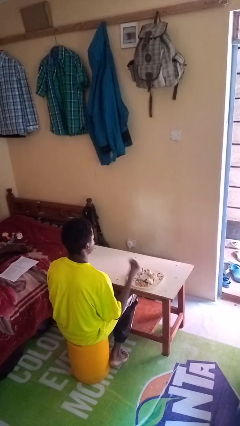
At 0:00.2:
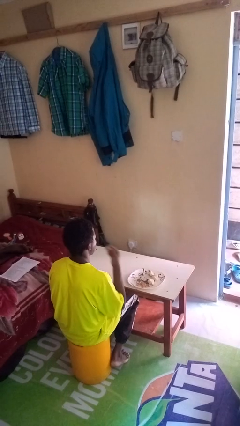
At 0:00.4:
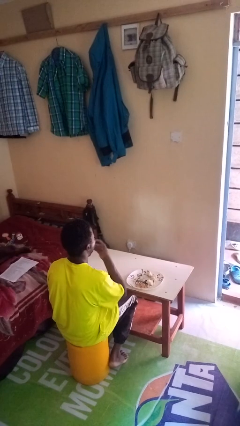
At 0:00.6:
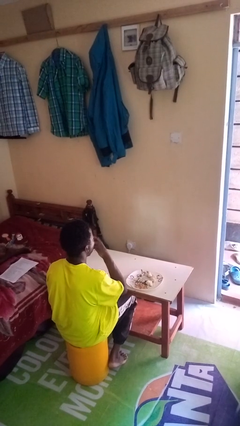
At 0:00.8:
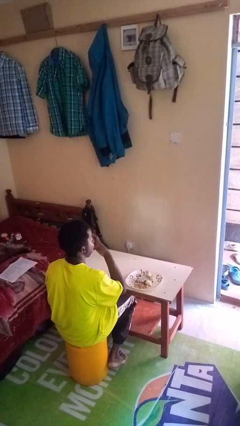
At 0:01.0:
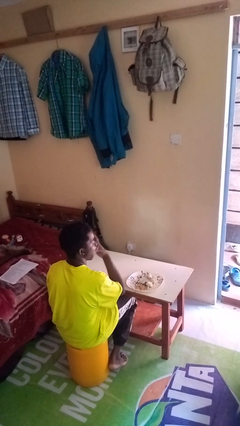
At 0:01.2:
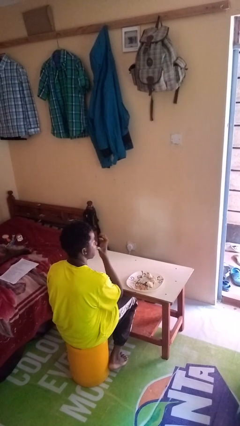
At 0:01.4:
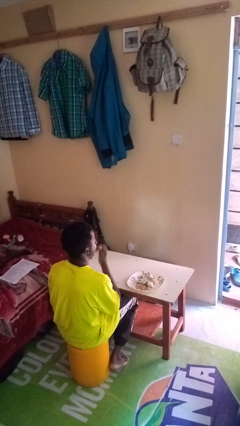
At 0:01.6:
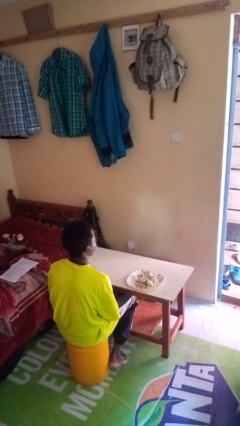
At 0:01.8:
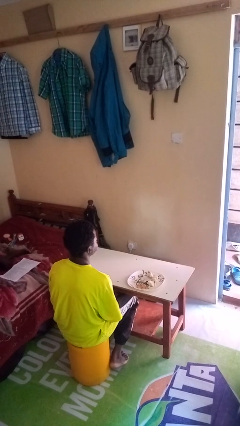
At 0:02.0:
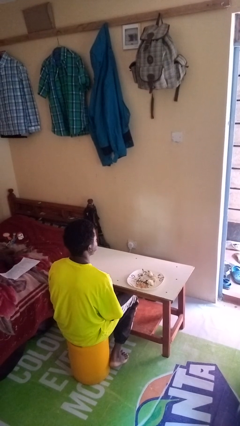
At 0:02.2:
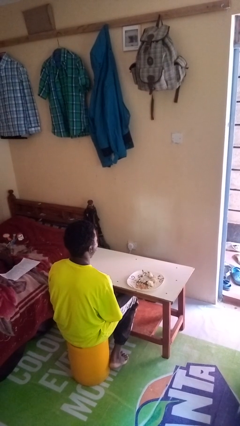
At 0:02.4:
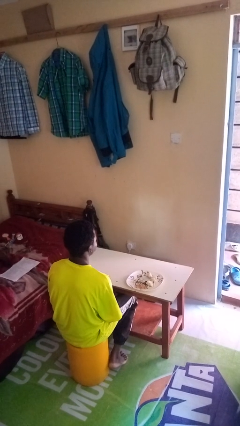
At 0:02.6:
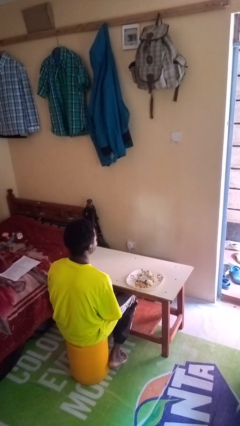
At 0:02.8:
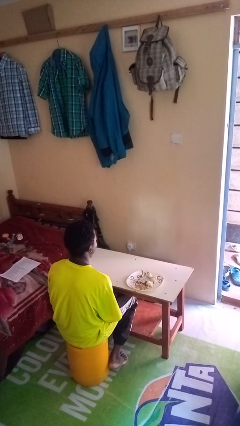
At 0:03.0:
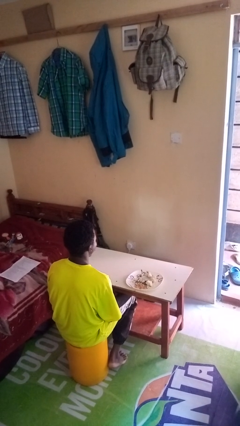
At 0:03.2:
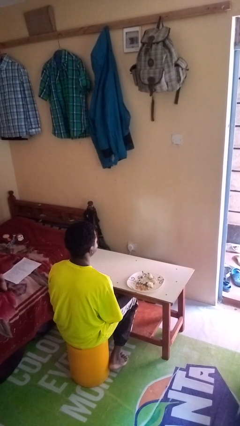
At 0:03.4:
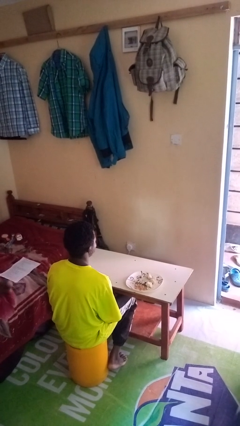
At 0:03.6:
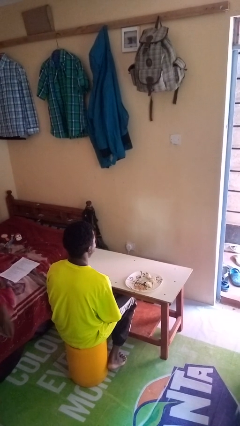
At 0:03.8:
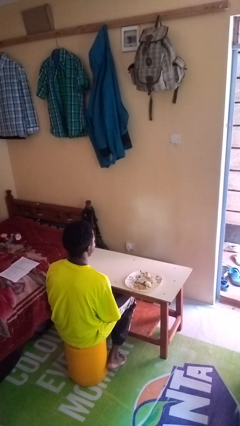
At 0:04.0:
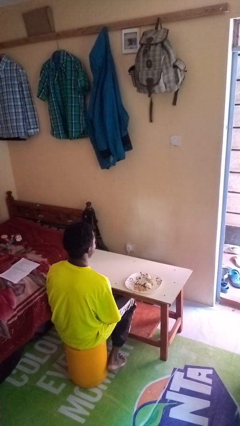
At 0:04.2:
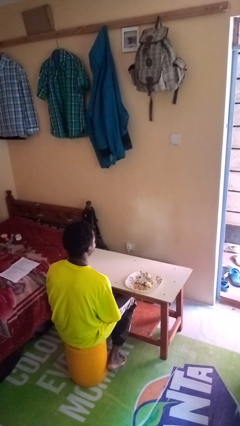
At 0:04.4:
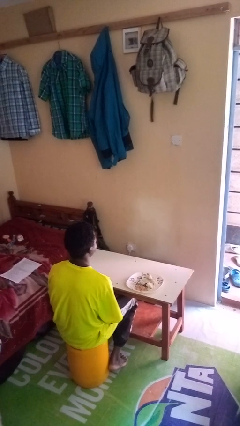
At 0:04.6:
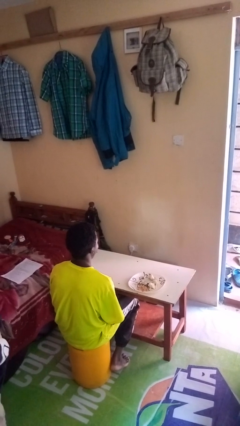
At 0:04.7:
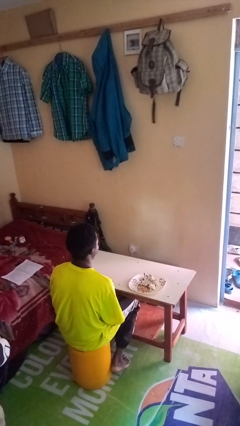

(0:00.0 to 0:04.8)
person eats with hands

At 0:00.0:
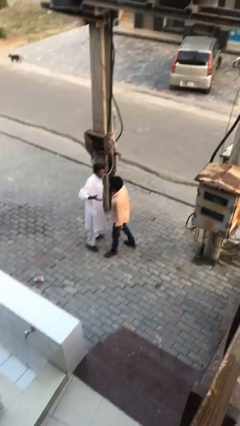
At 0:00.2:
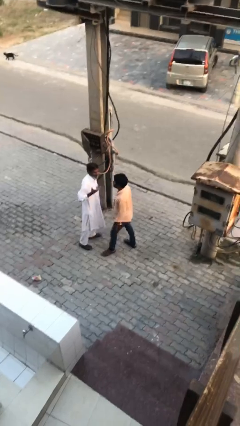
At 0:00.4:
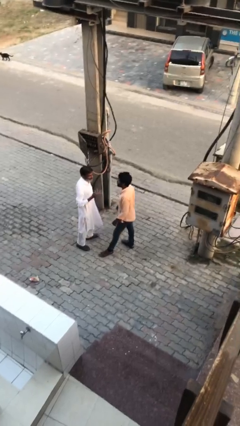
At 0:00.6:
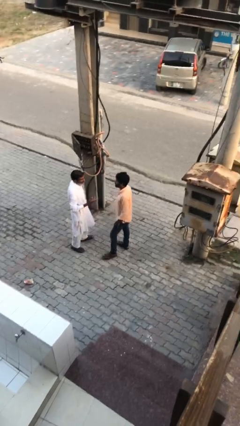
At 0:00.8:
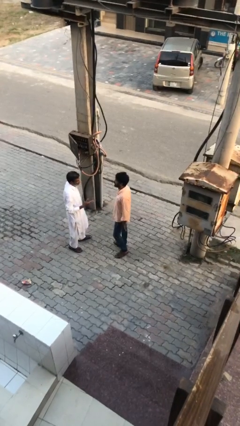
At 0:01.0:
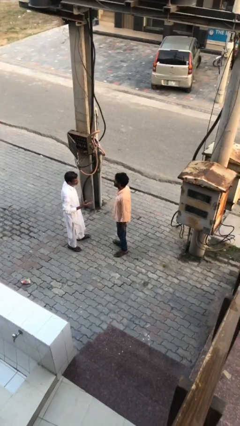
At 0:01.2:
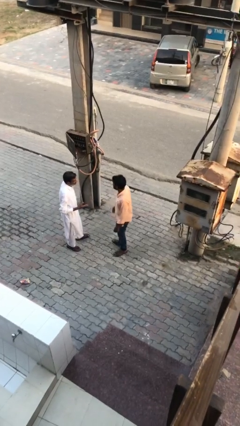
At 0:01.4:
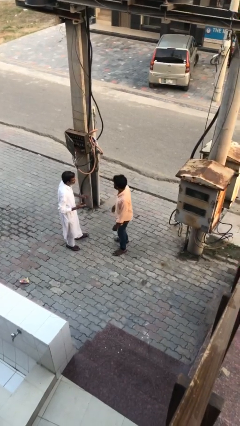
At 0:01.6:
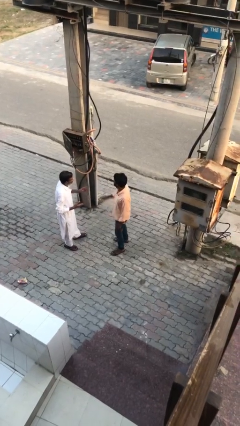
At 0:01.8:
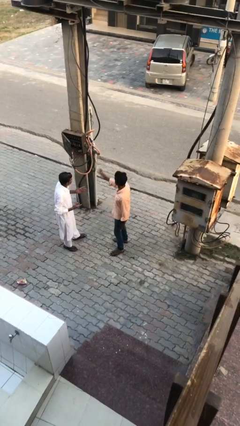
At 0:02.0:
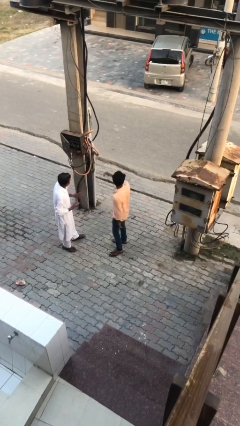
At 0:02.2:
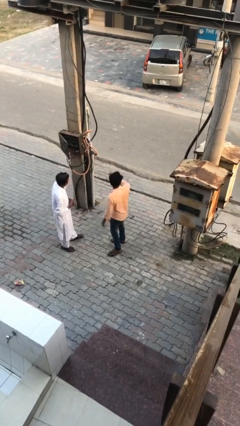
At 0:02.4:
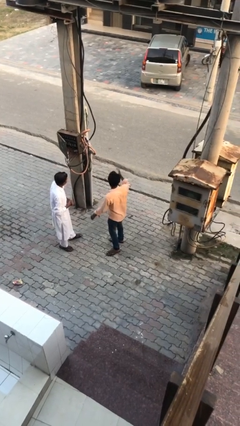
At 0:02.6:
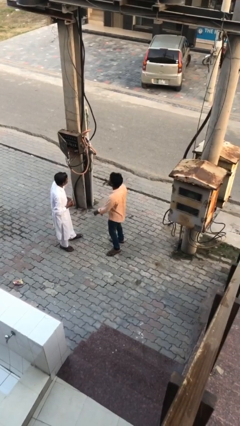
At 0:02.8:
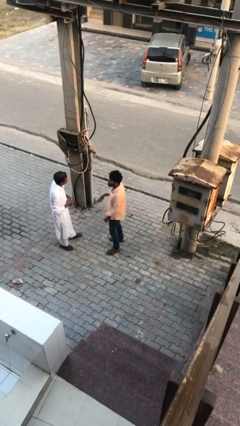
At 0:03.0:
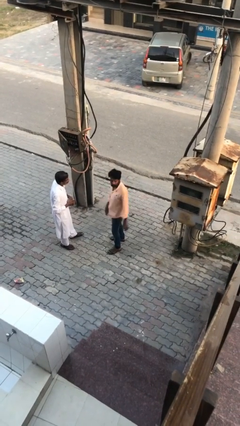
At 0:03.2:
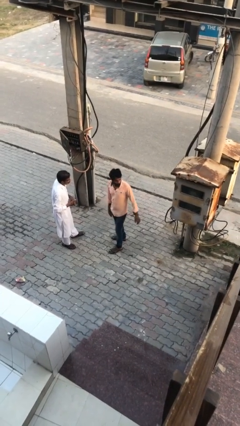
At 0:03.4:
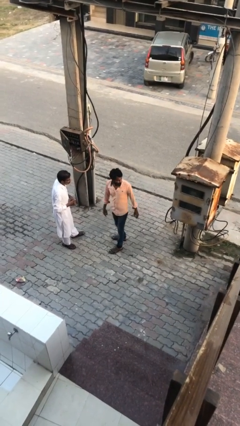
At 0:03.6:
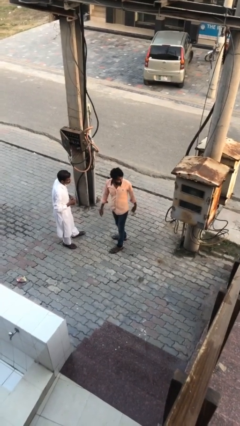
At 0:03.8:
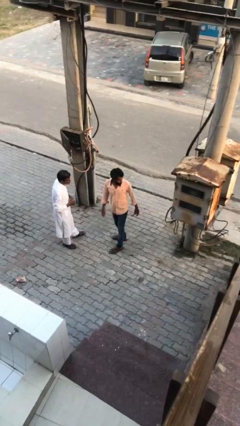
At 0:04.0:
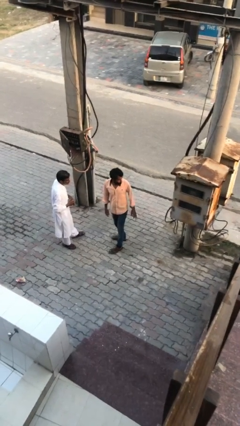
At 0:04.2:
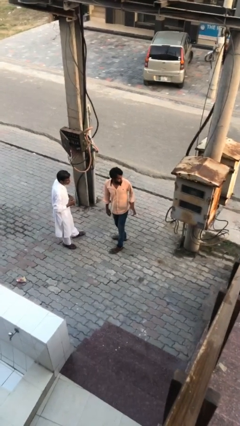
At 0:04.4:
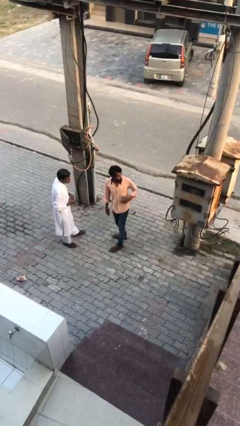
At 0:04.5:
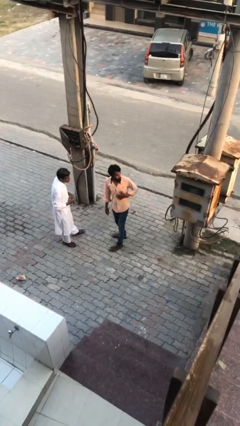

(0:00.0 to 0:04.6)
person talks to person

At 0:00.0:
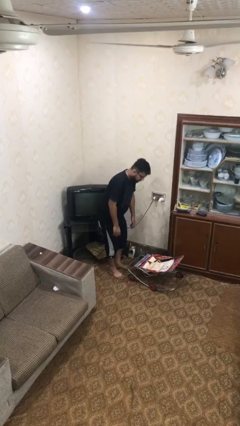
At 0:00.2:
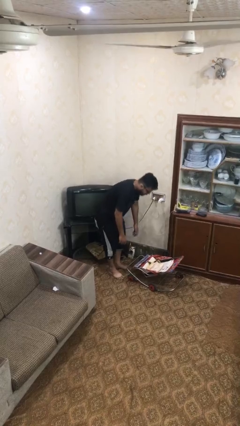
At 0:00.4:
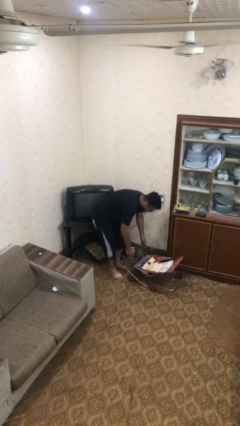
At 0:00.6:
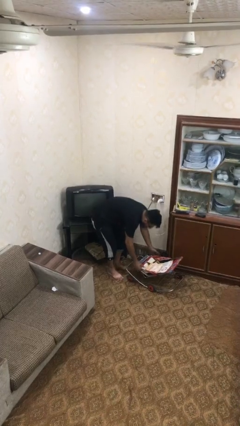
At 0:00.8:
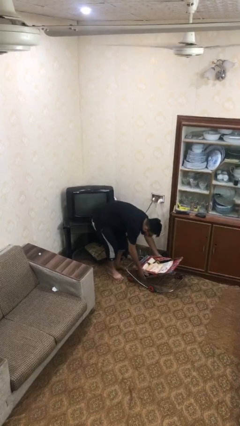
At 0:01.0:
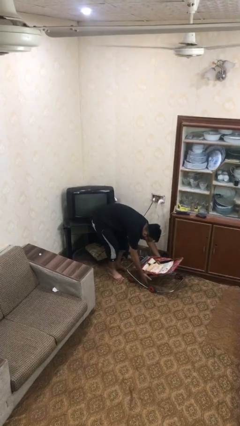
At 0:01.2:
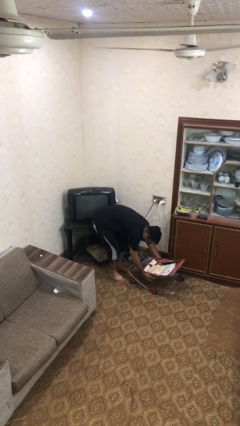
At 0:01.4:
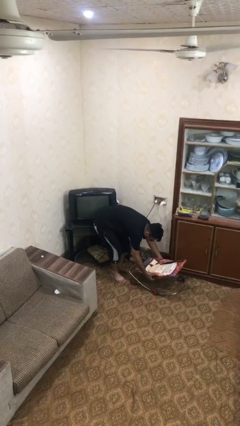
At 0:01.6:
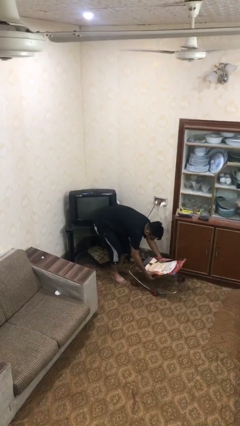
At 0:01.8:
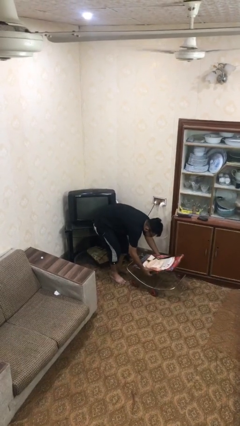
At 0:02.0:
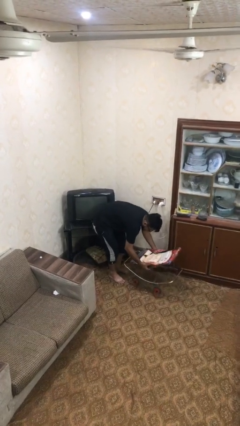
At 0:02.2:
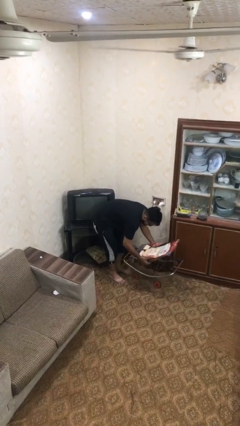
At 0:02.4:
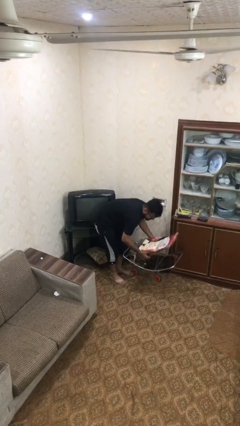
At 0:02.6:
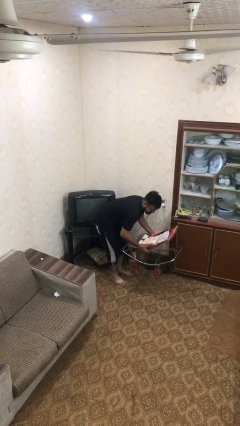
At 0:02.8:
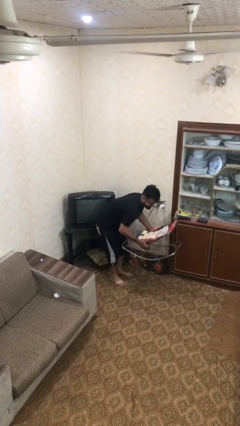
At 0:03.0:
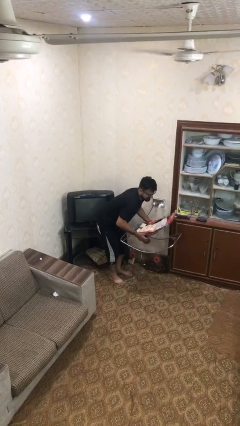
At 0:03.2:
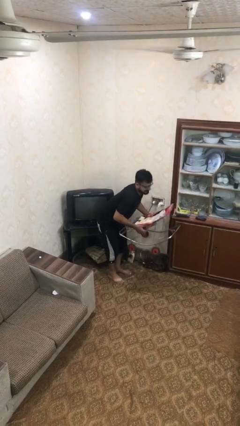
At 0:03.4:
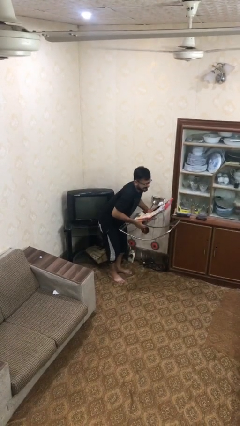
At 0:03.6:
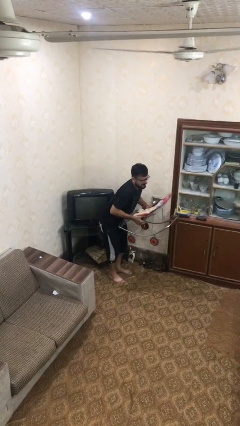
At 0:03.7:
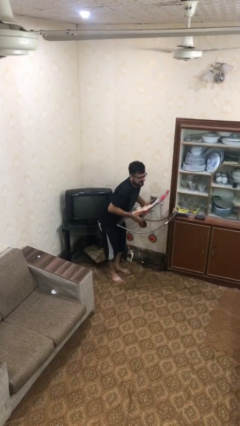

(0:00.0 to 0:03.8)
person picks up object from floor

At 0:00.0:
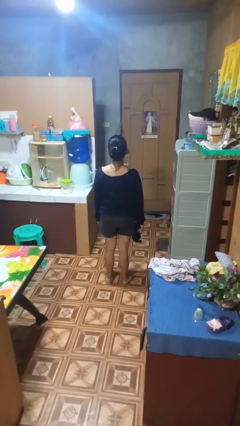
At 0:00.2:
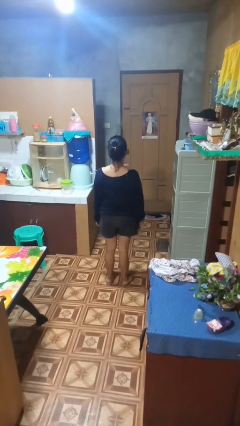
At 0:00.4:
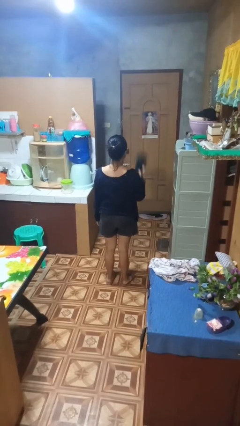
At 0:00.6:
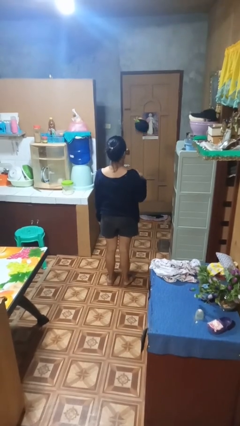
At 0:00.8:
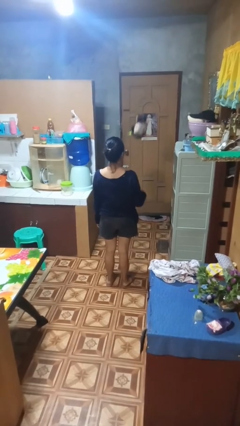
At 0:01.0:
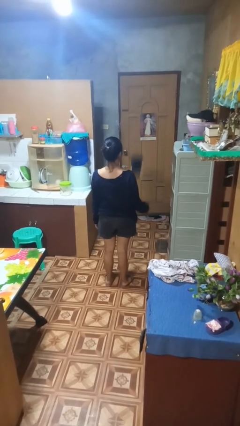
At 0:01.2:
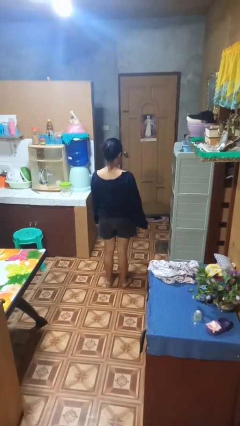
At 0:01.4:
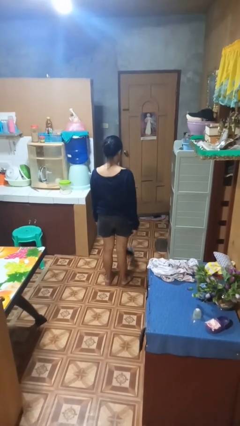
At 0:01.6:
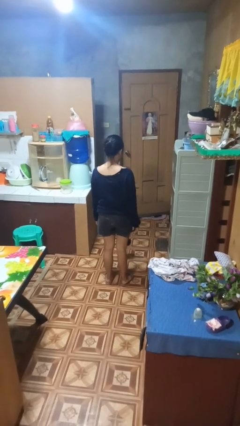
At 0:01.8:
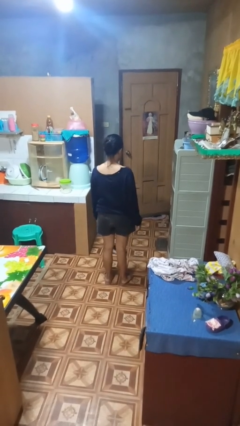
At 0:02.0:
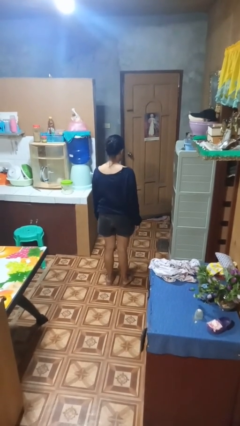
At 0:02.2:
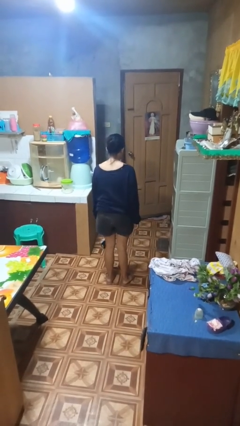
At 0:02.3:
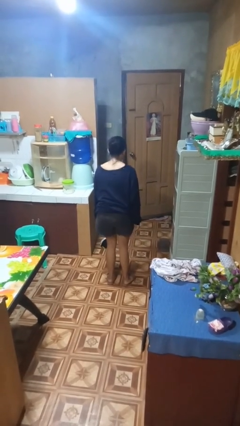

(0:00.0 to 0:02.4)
person throws object into air

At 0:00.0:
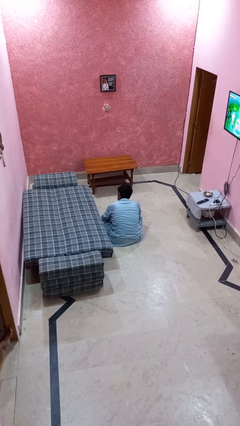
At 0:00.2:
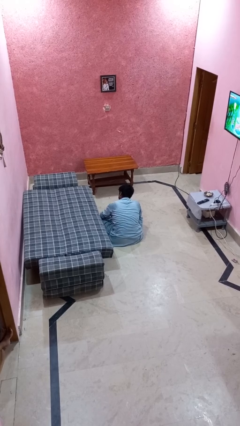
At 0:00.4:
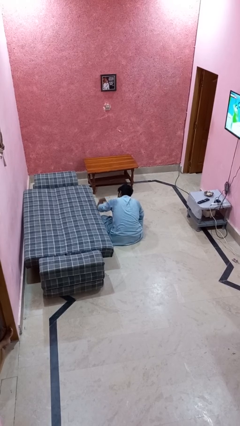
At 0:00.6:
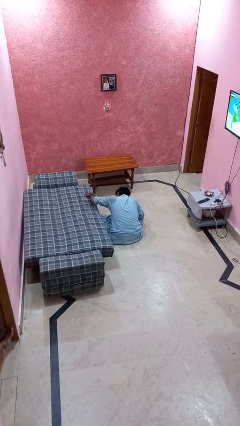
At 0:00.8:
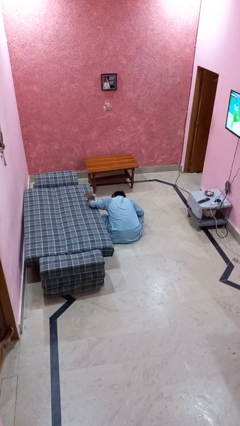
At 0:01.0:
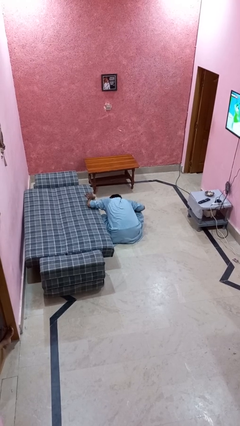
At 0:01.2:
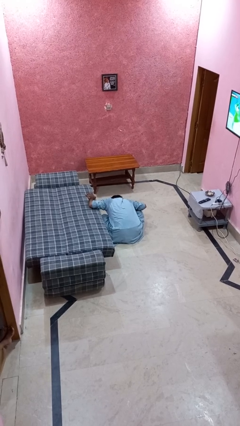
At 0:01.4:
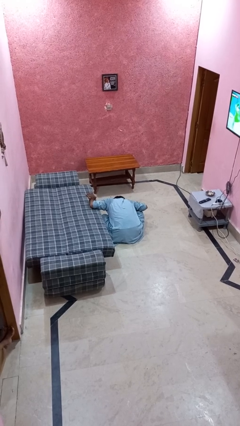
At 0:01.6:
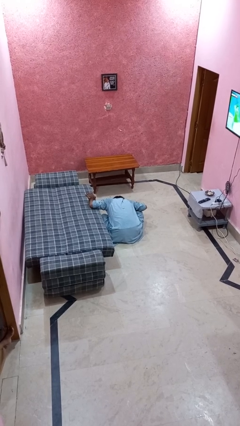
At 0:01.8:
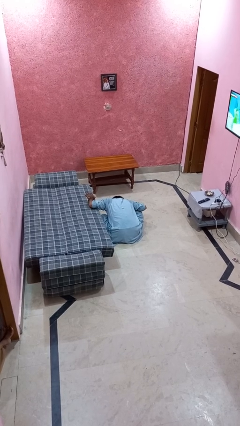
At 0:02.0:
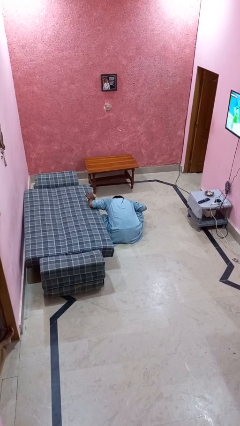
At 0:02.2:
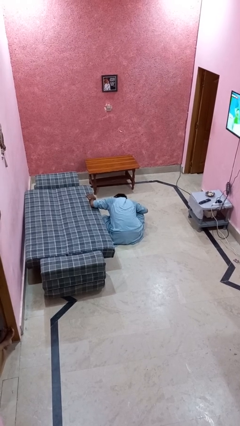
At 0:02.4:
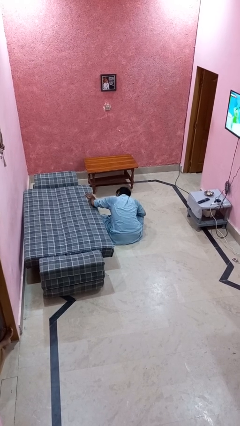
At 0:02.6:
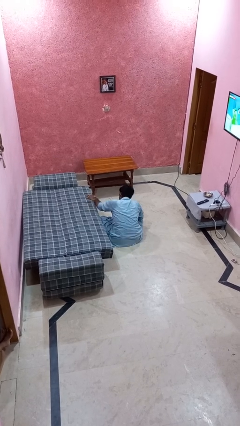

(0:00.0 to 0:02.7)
person searches under bed
